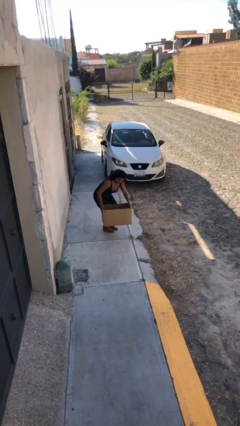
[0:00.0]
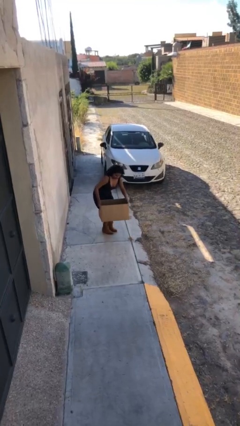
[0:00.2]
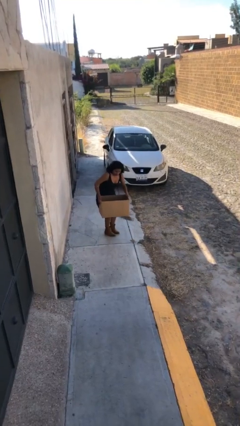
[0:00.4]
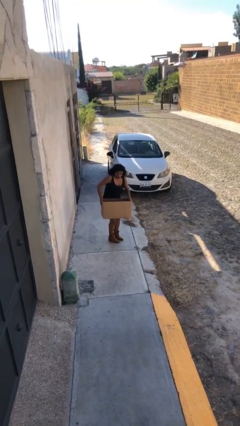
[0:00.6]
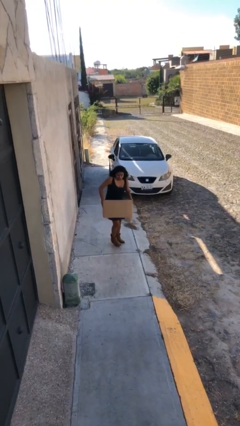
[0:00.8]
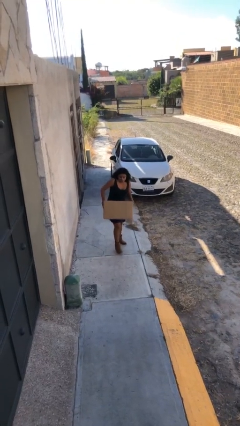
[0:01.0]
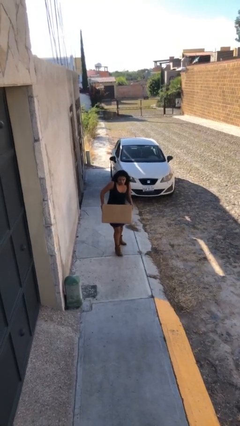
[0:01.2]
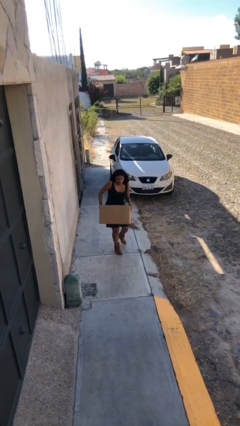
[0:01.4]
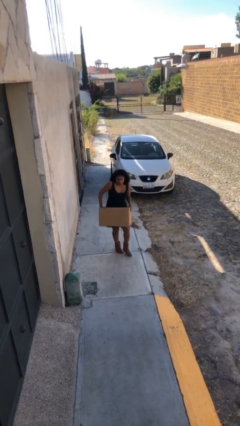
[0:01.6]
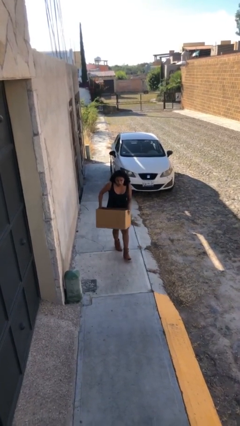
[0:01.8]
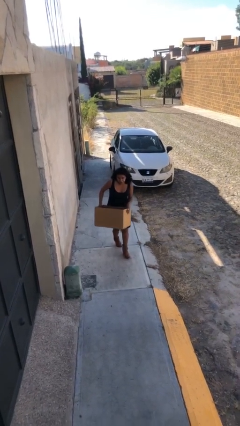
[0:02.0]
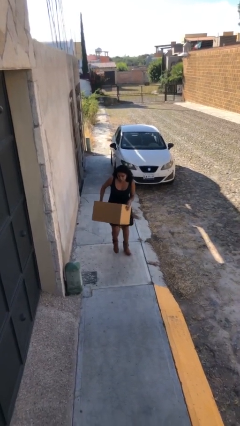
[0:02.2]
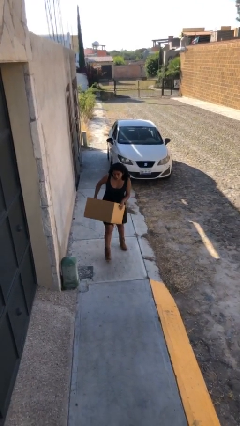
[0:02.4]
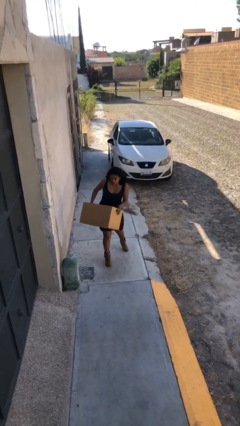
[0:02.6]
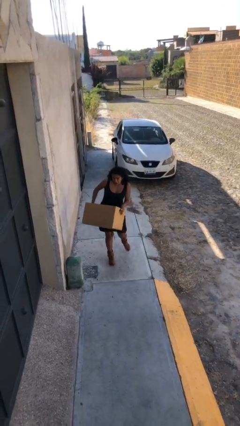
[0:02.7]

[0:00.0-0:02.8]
person carries heavy object

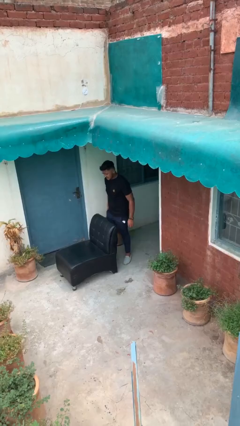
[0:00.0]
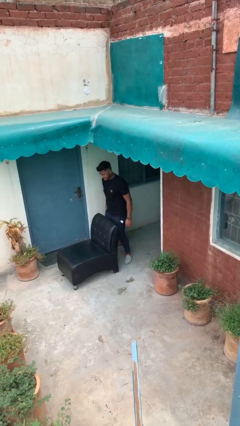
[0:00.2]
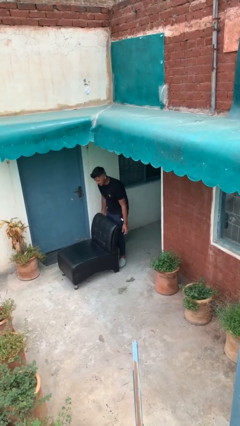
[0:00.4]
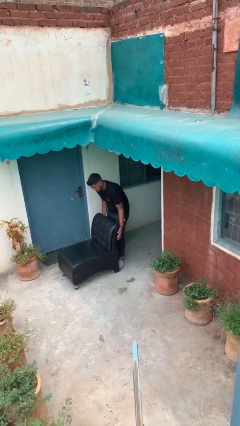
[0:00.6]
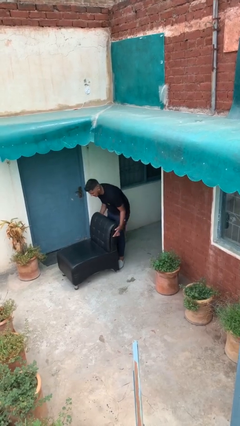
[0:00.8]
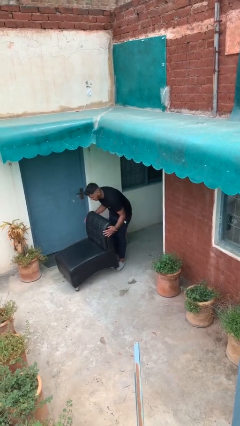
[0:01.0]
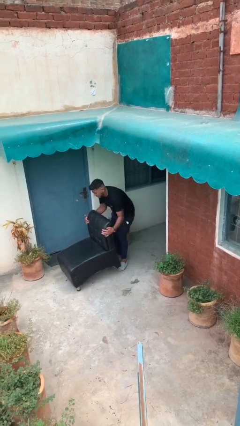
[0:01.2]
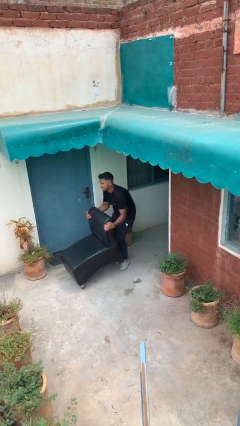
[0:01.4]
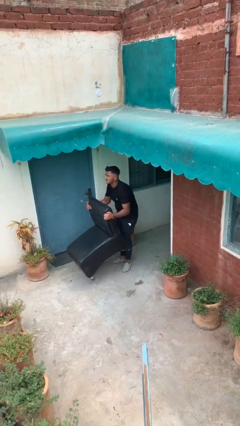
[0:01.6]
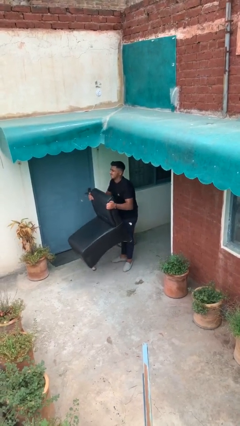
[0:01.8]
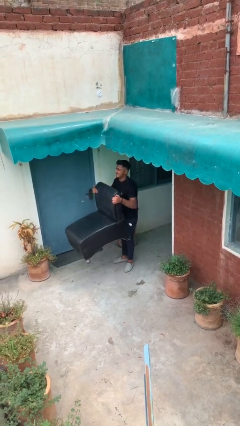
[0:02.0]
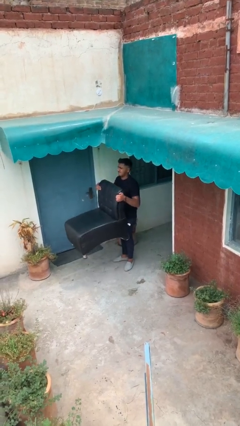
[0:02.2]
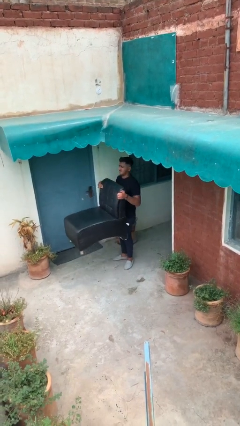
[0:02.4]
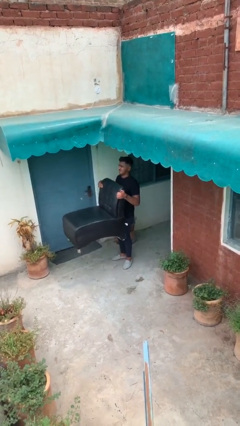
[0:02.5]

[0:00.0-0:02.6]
person picks up object from floor

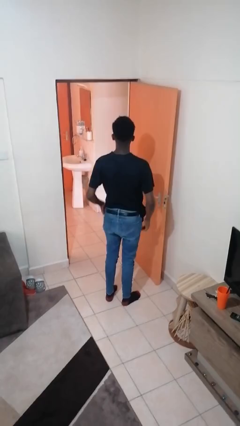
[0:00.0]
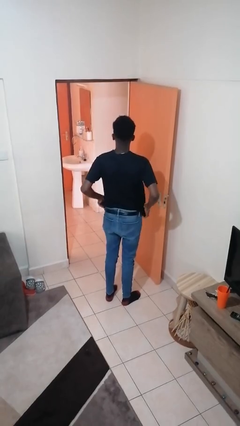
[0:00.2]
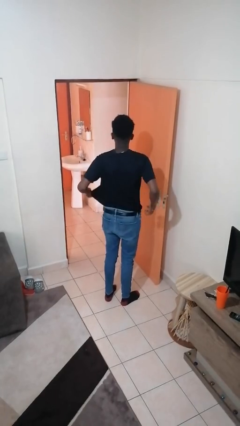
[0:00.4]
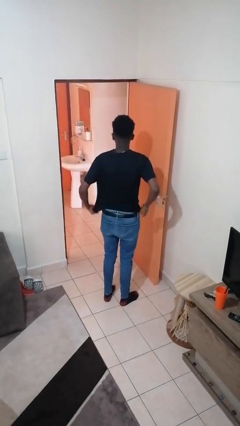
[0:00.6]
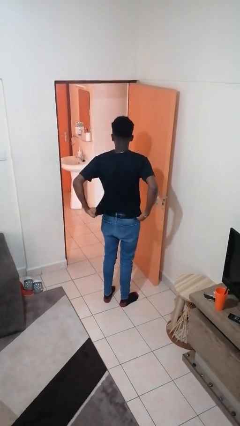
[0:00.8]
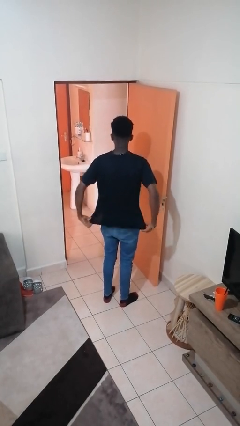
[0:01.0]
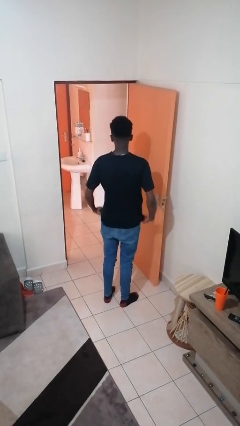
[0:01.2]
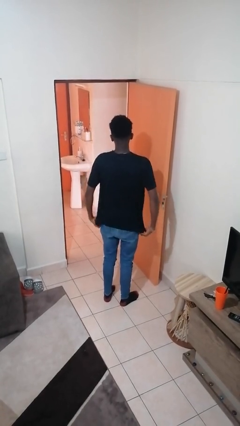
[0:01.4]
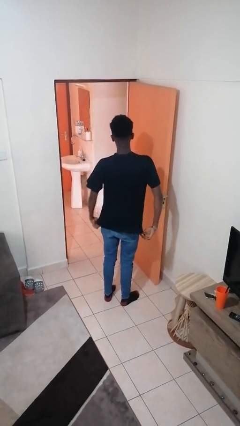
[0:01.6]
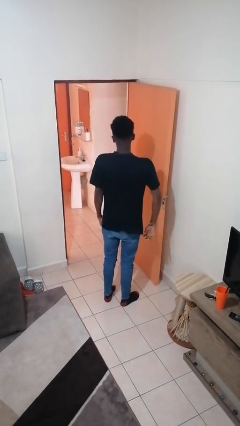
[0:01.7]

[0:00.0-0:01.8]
person untucks shirt

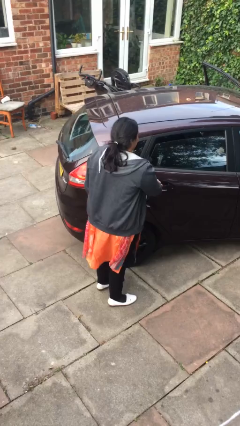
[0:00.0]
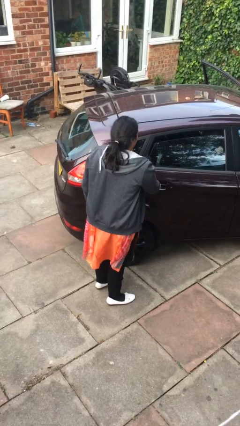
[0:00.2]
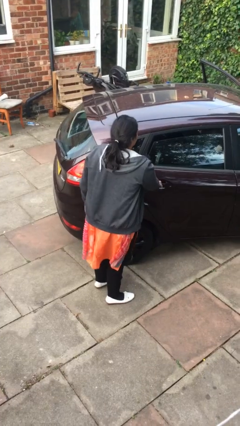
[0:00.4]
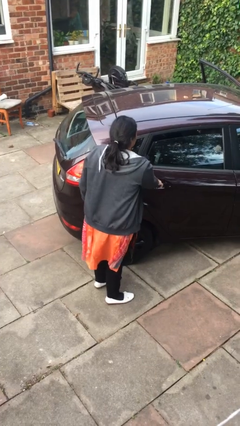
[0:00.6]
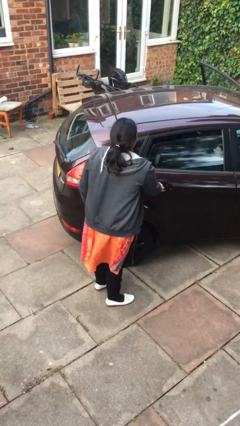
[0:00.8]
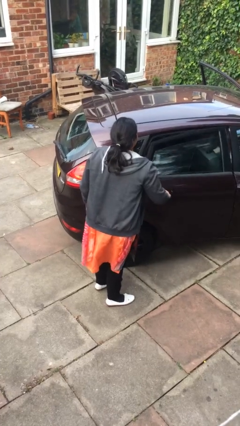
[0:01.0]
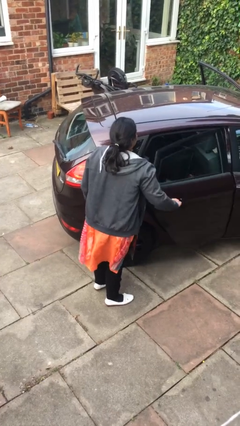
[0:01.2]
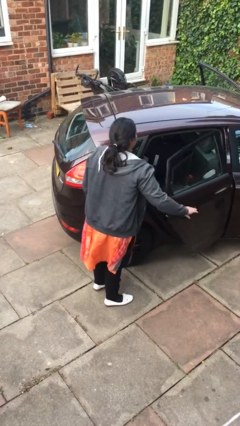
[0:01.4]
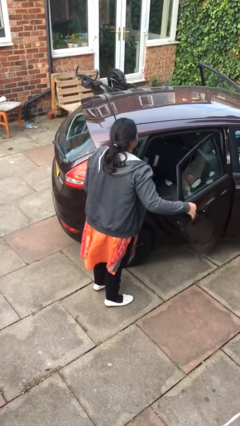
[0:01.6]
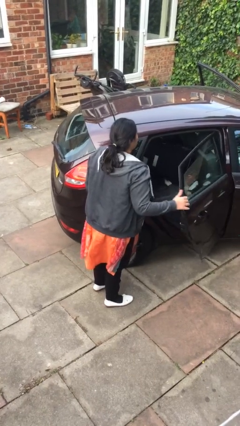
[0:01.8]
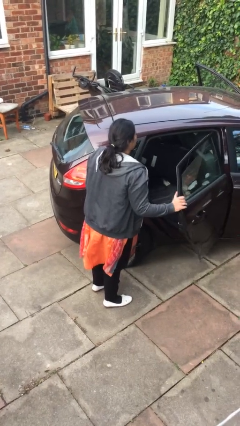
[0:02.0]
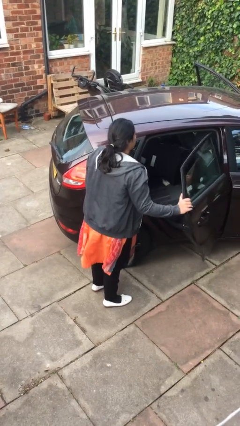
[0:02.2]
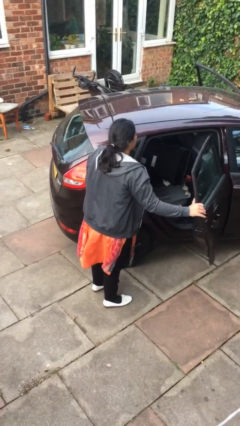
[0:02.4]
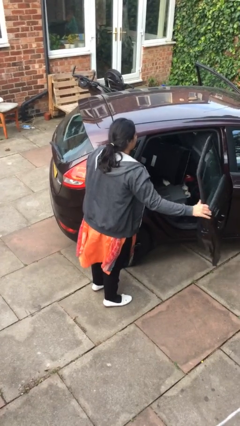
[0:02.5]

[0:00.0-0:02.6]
person opens car door

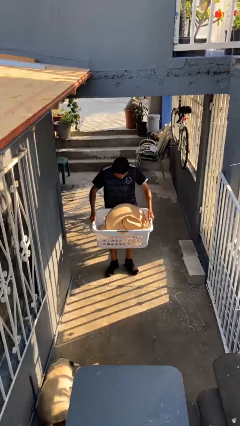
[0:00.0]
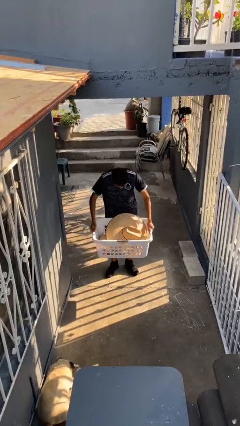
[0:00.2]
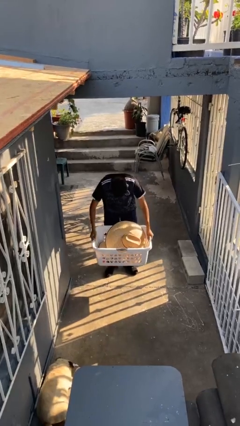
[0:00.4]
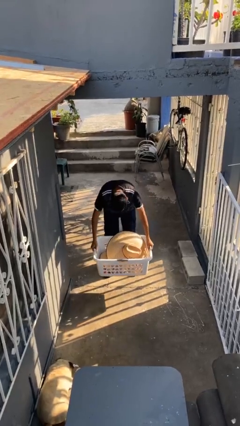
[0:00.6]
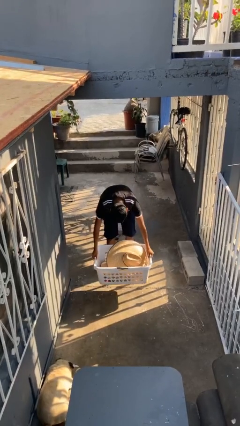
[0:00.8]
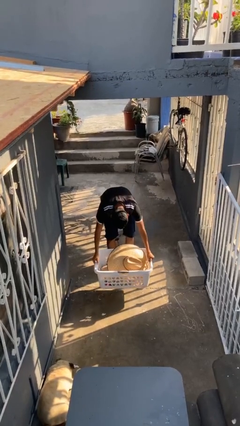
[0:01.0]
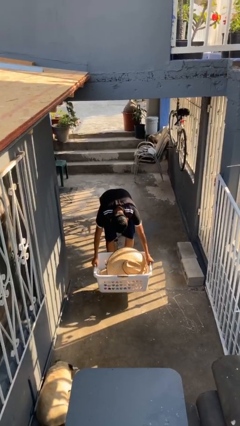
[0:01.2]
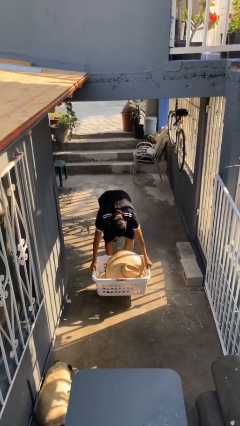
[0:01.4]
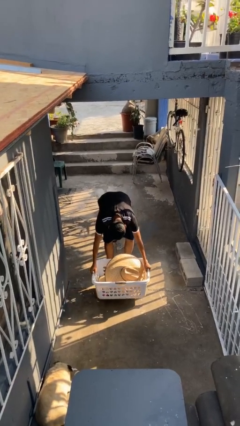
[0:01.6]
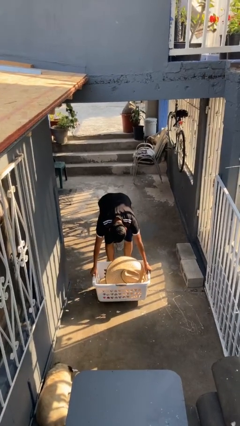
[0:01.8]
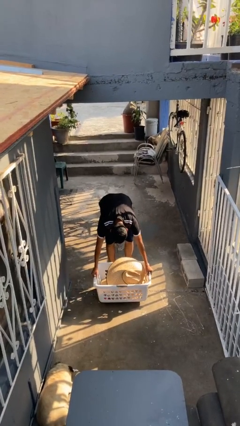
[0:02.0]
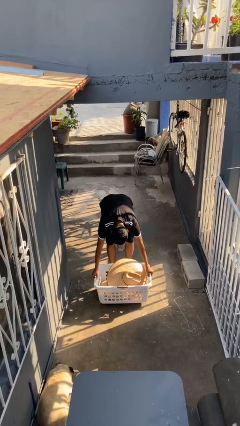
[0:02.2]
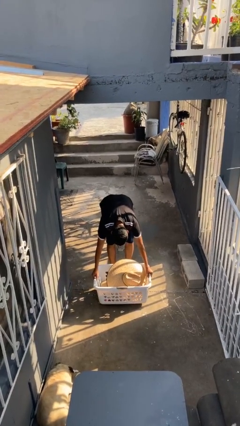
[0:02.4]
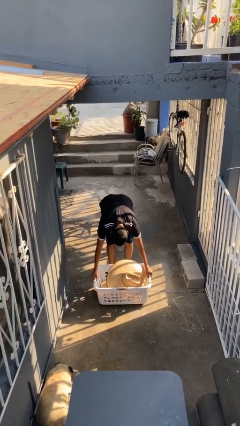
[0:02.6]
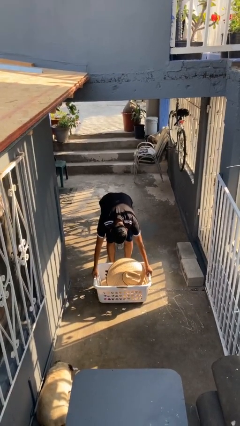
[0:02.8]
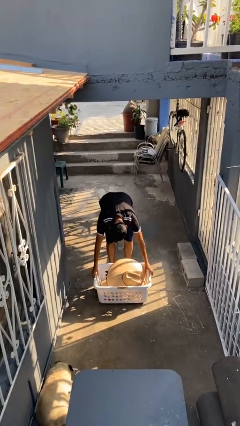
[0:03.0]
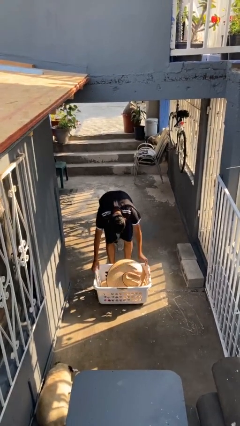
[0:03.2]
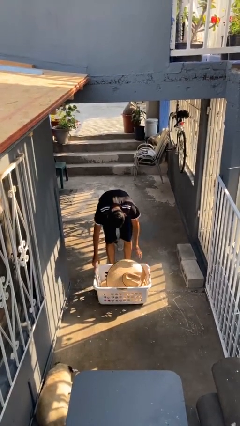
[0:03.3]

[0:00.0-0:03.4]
person puts down object on floor

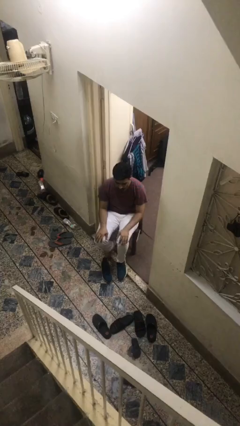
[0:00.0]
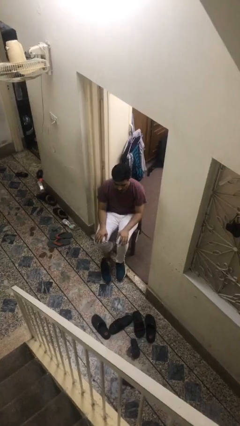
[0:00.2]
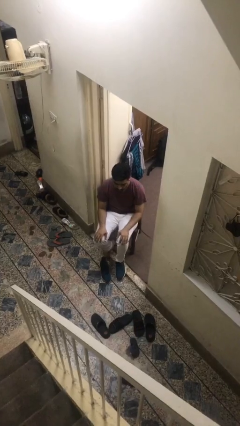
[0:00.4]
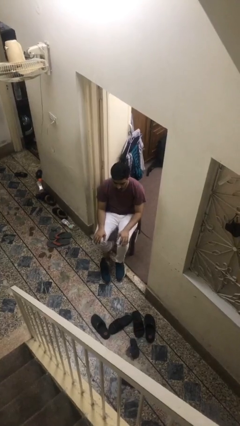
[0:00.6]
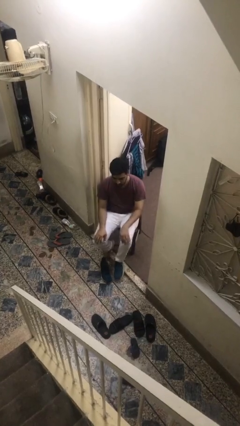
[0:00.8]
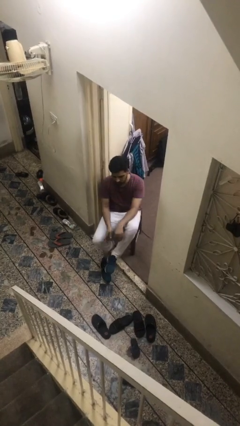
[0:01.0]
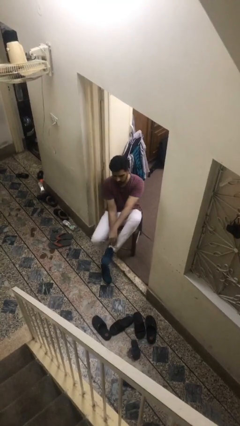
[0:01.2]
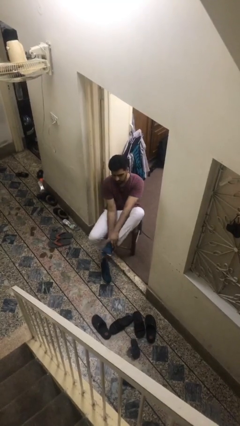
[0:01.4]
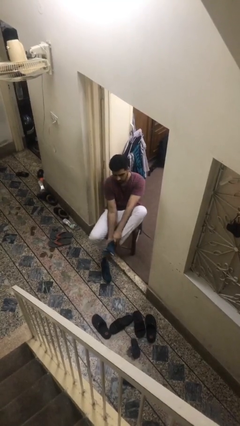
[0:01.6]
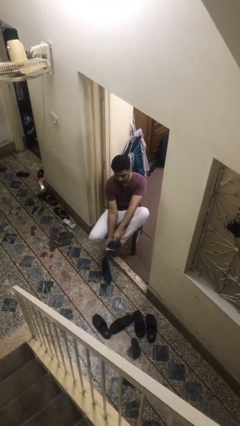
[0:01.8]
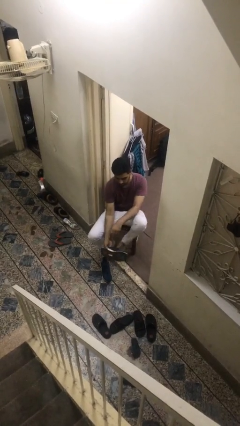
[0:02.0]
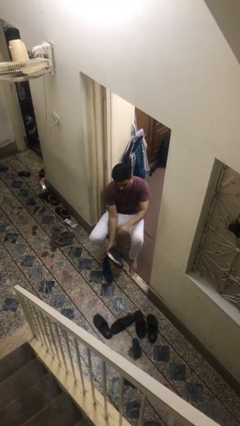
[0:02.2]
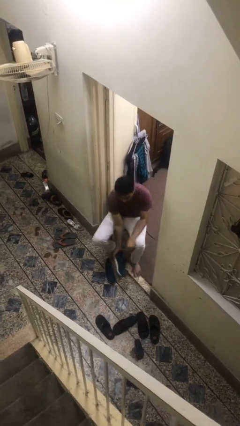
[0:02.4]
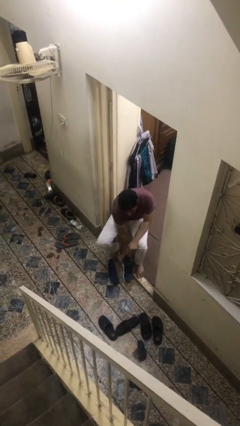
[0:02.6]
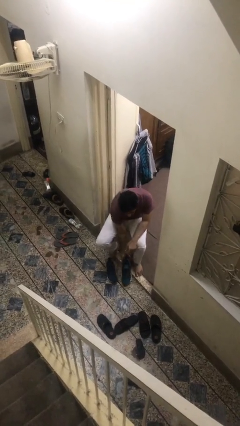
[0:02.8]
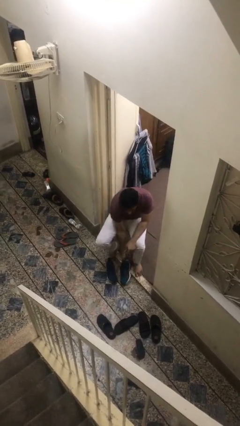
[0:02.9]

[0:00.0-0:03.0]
person takes off shoes

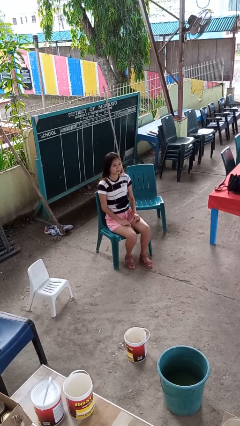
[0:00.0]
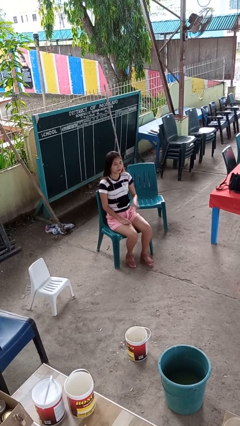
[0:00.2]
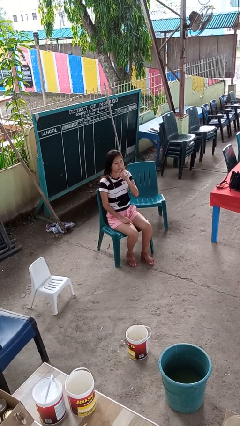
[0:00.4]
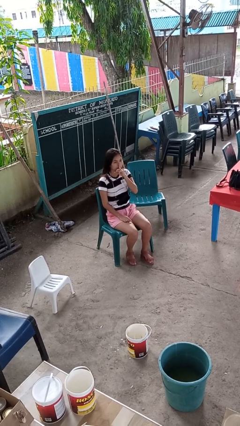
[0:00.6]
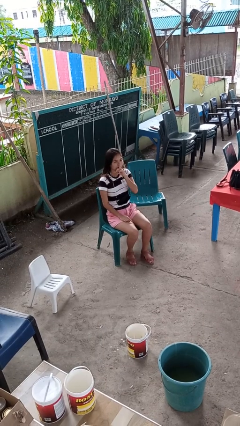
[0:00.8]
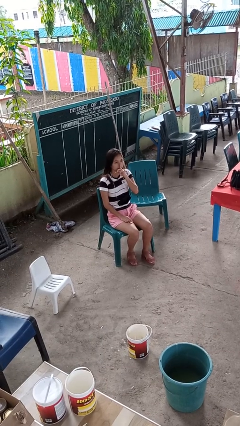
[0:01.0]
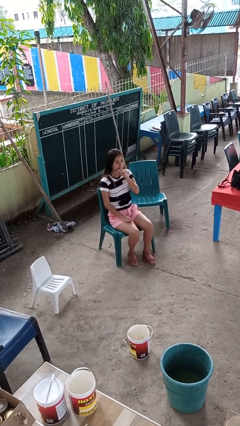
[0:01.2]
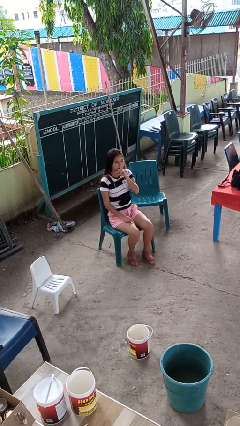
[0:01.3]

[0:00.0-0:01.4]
person gestures be quiet
